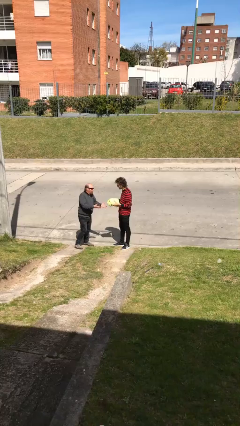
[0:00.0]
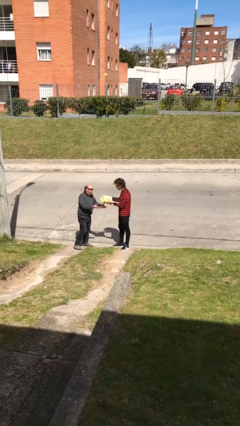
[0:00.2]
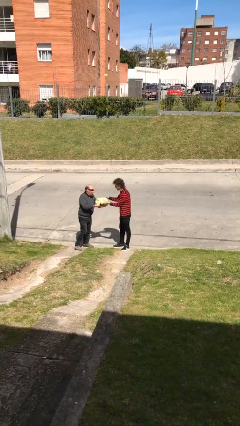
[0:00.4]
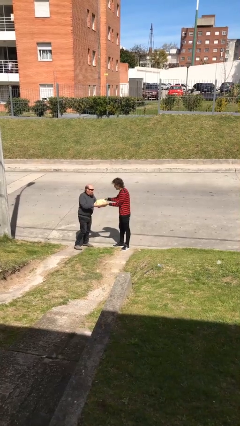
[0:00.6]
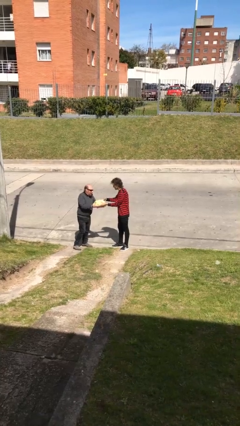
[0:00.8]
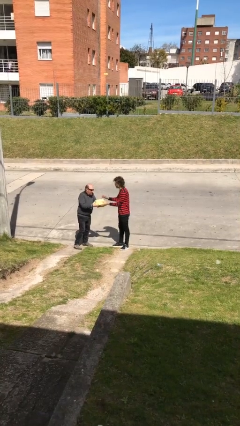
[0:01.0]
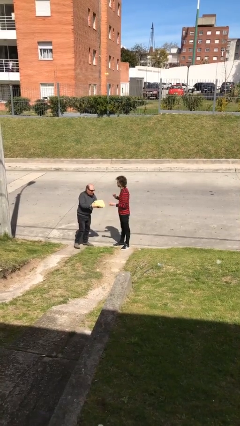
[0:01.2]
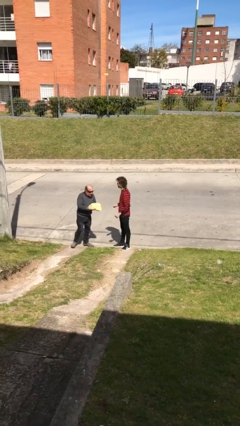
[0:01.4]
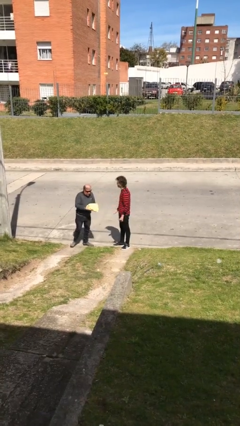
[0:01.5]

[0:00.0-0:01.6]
person transfers object to person

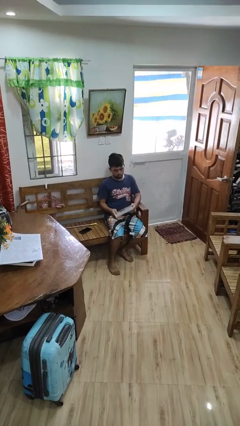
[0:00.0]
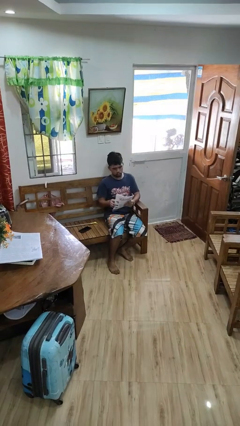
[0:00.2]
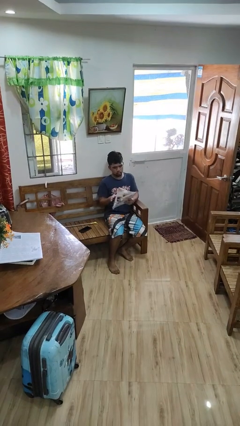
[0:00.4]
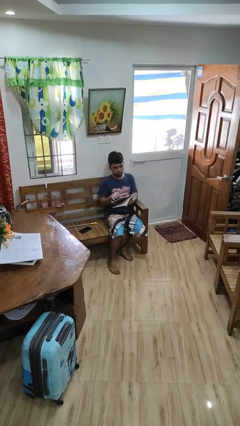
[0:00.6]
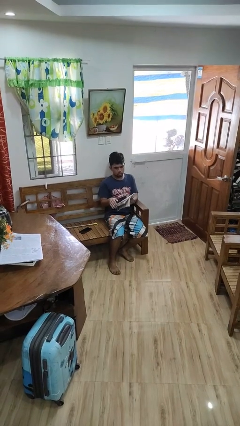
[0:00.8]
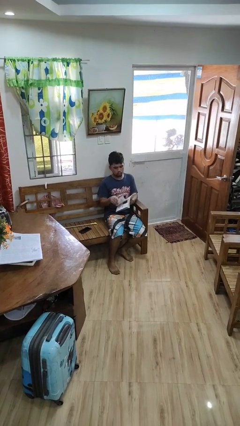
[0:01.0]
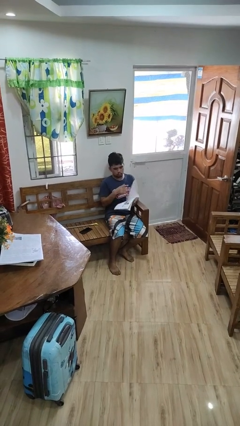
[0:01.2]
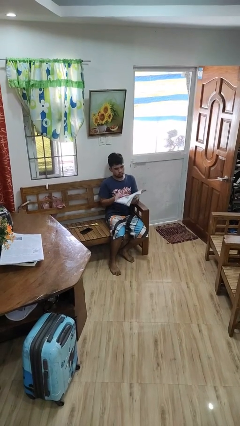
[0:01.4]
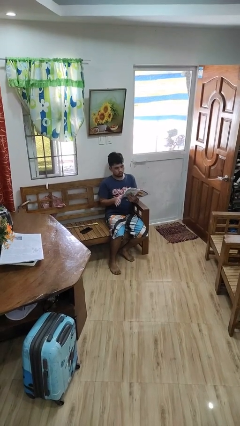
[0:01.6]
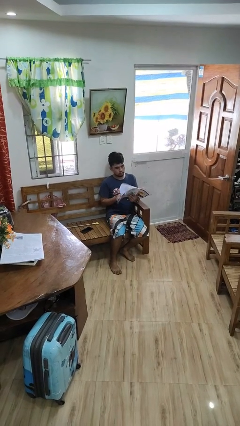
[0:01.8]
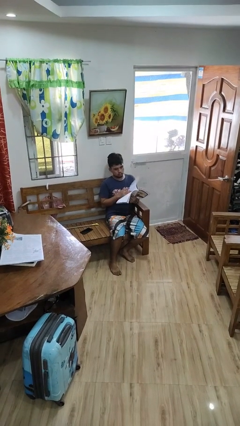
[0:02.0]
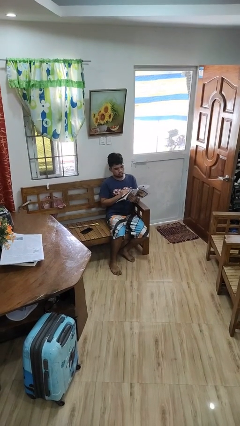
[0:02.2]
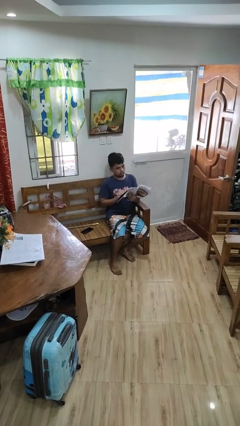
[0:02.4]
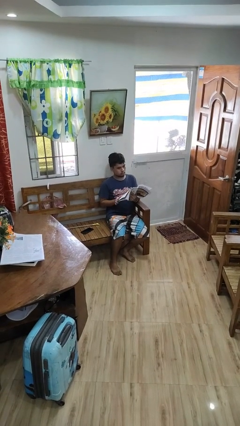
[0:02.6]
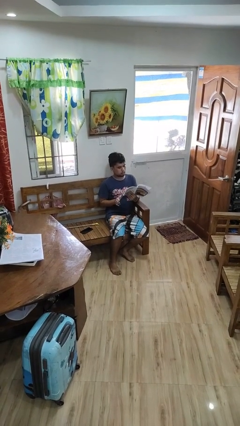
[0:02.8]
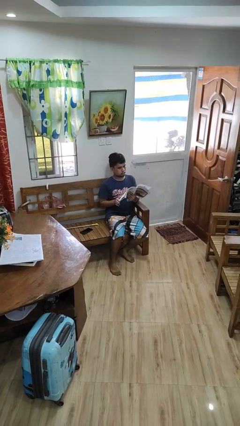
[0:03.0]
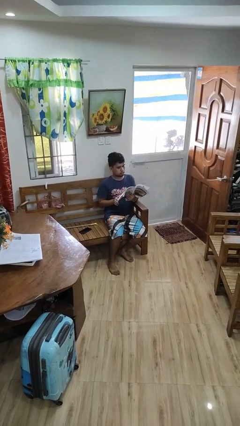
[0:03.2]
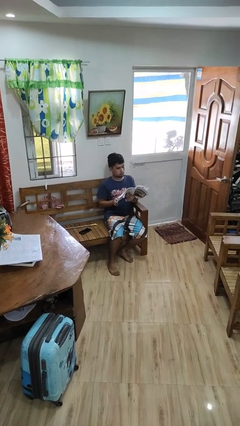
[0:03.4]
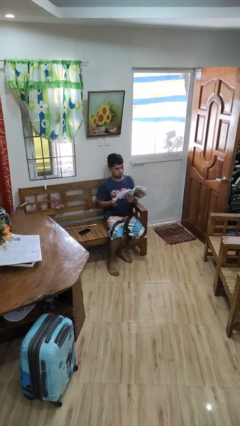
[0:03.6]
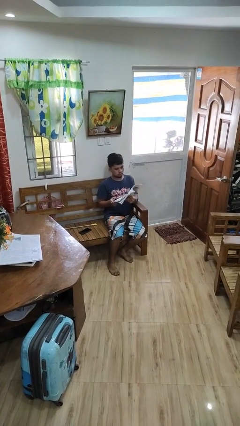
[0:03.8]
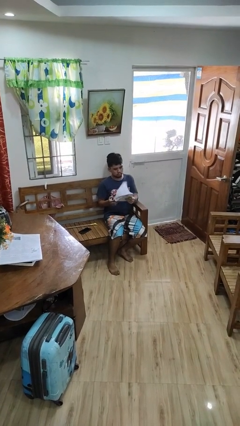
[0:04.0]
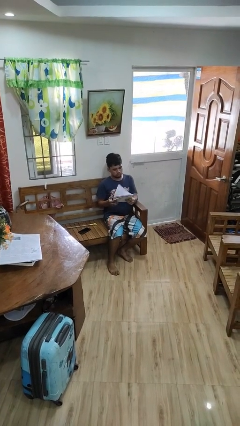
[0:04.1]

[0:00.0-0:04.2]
person reads magazine

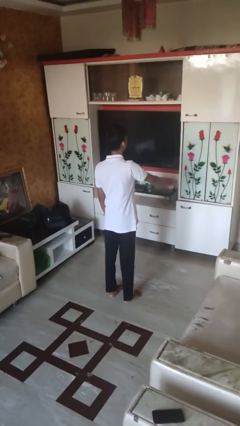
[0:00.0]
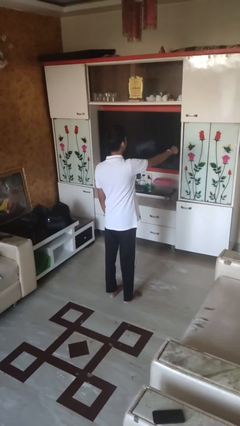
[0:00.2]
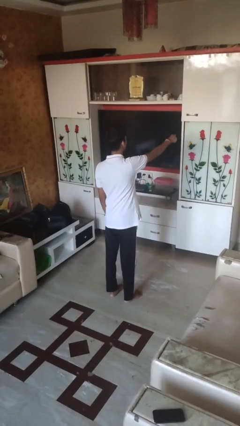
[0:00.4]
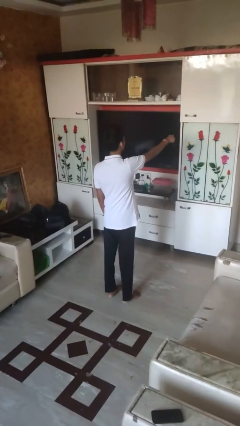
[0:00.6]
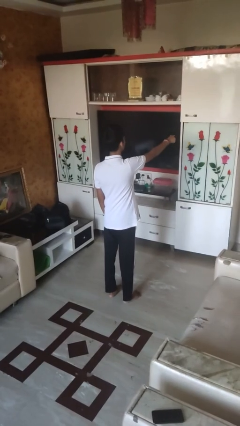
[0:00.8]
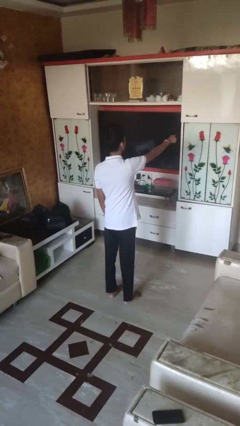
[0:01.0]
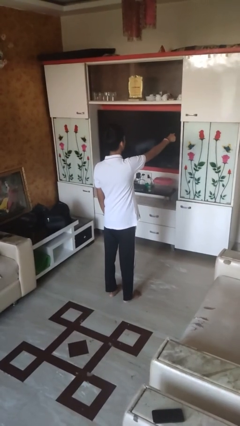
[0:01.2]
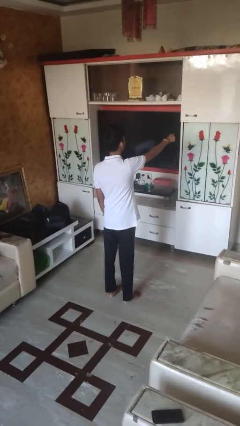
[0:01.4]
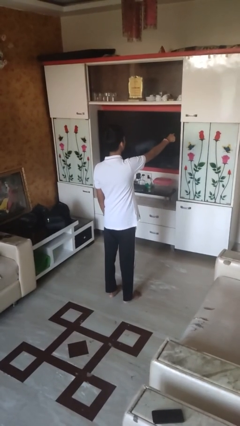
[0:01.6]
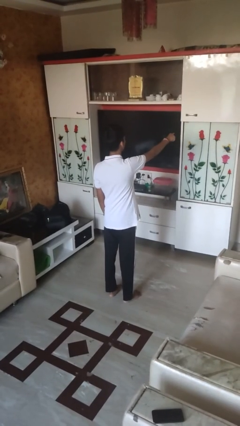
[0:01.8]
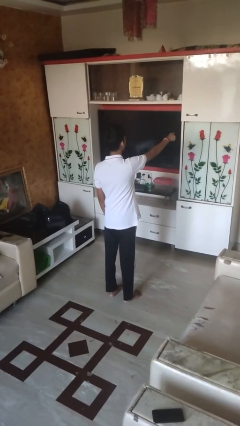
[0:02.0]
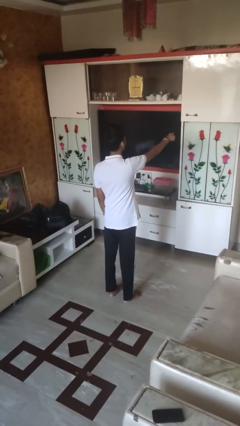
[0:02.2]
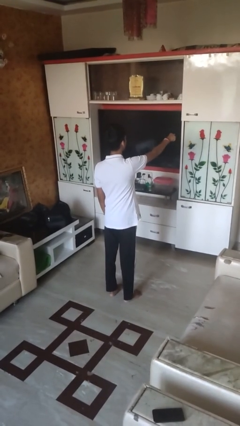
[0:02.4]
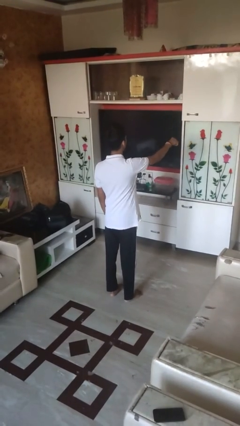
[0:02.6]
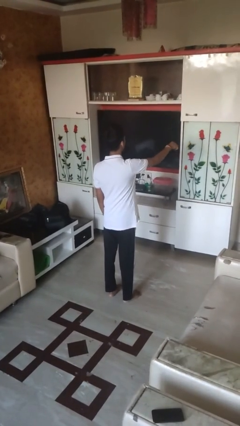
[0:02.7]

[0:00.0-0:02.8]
person points at person

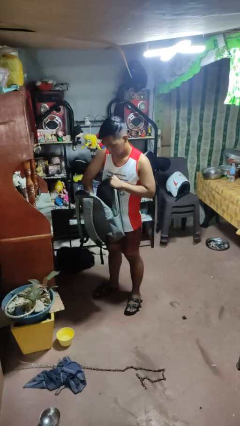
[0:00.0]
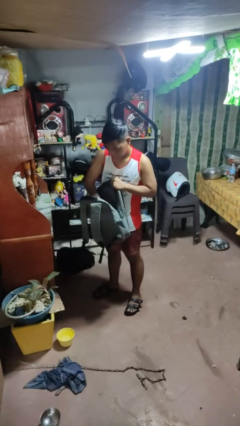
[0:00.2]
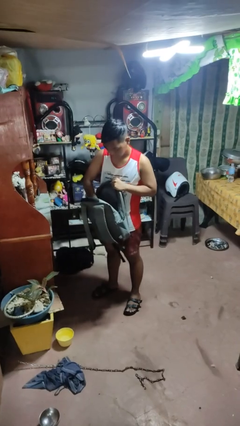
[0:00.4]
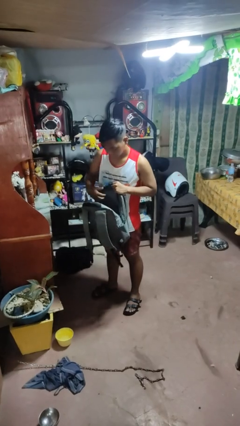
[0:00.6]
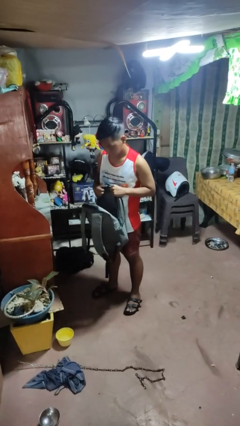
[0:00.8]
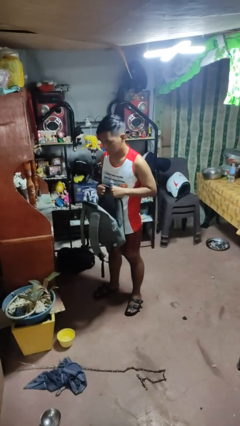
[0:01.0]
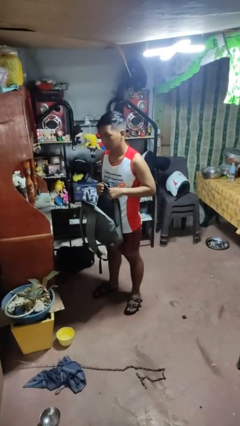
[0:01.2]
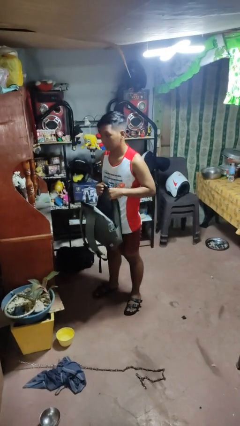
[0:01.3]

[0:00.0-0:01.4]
person puts object into bag

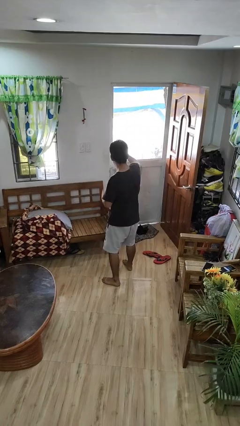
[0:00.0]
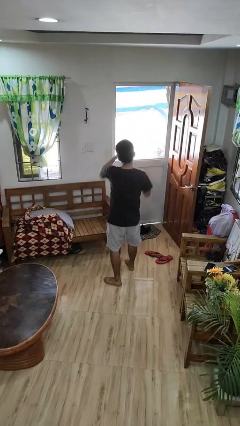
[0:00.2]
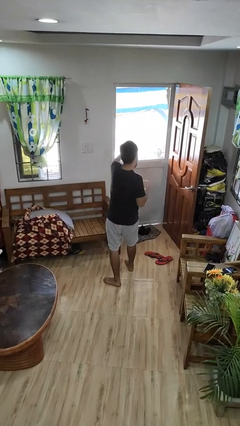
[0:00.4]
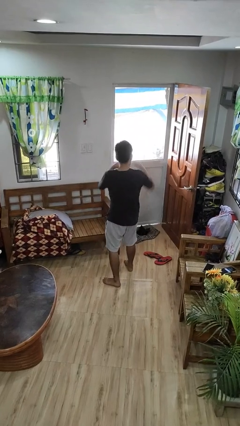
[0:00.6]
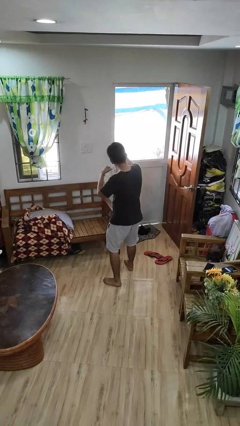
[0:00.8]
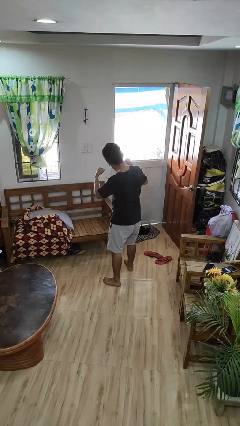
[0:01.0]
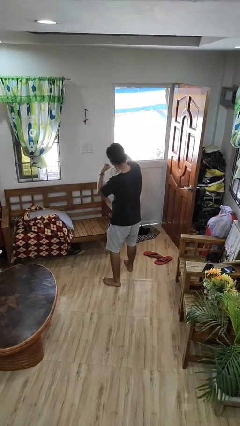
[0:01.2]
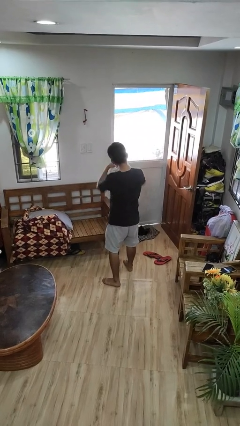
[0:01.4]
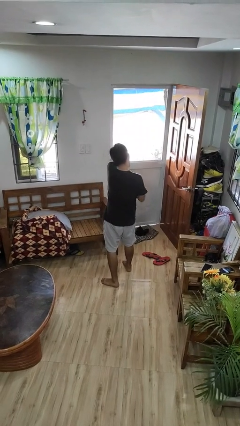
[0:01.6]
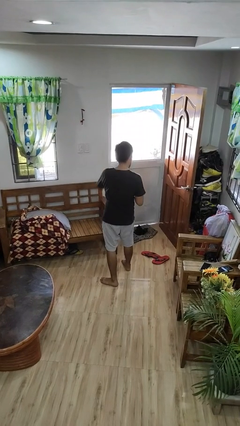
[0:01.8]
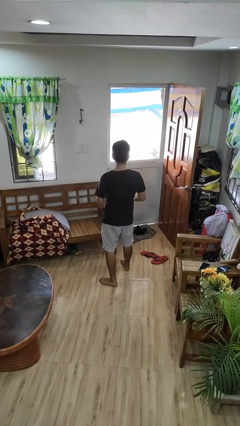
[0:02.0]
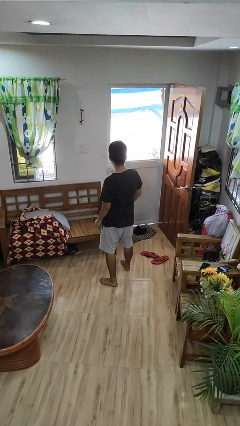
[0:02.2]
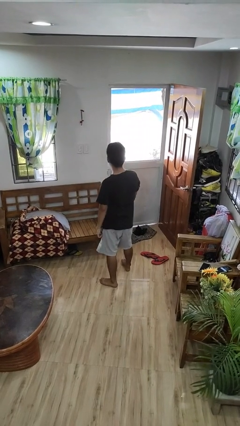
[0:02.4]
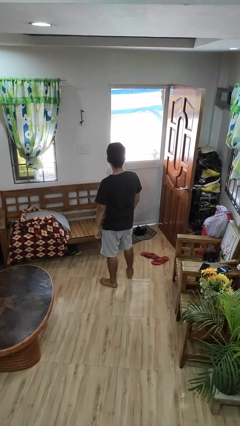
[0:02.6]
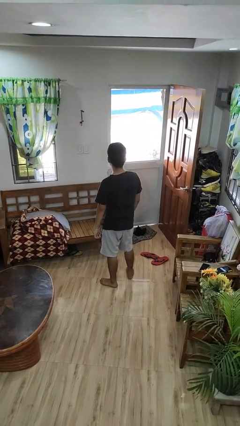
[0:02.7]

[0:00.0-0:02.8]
person punches

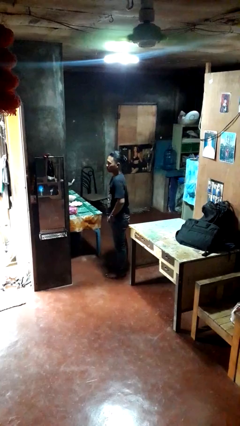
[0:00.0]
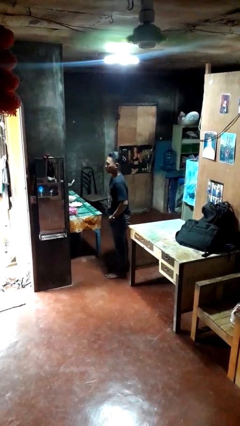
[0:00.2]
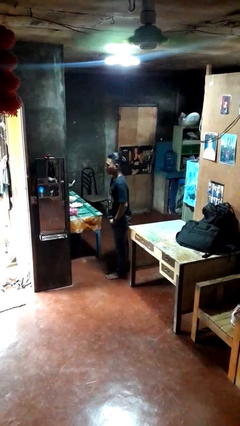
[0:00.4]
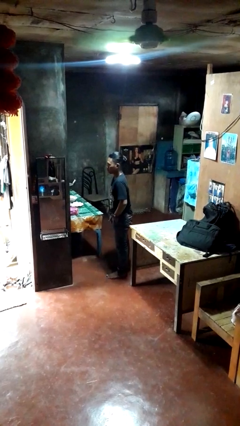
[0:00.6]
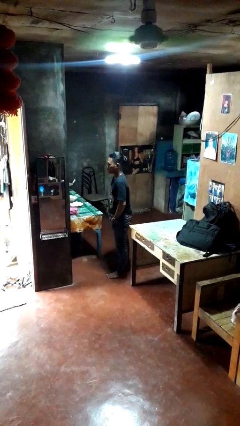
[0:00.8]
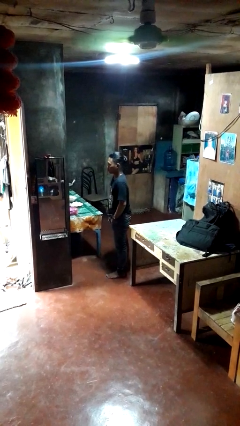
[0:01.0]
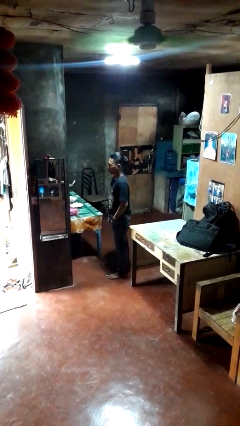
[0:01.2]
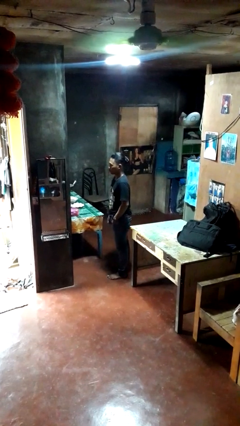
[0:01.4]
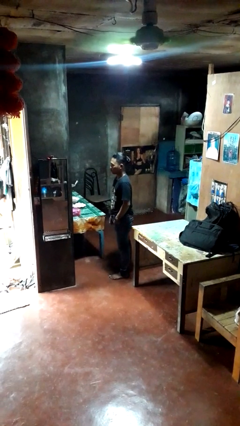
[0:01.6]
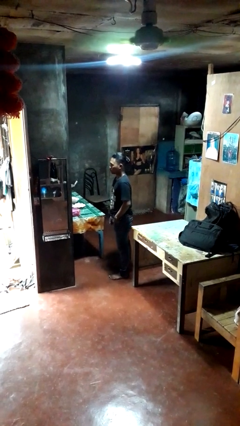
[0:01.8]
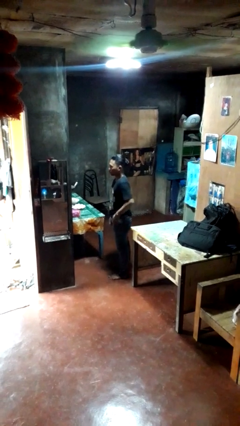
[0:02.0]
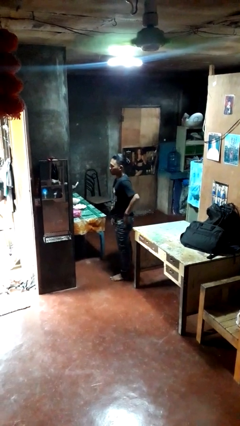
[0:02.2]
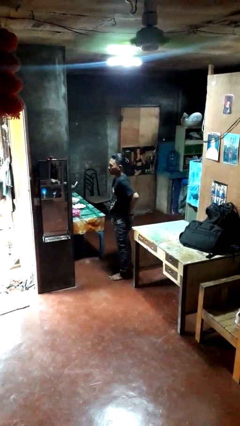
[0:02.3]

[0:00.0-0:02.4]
person puts hands in back pockets

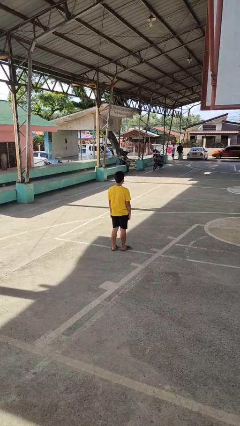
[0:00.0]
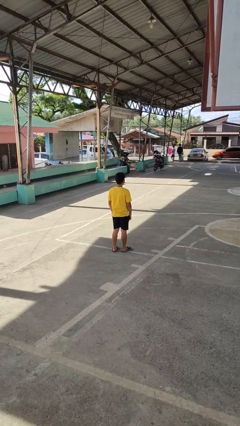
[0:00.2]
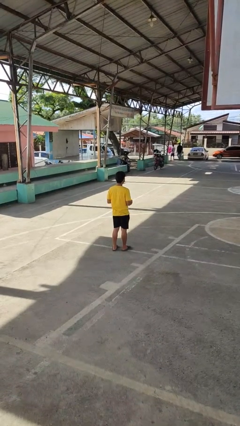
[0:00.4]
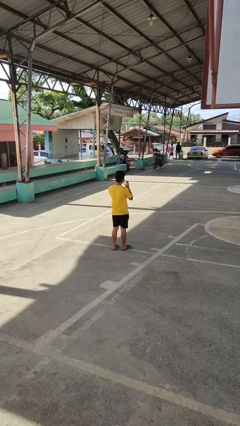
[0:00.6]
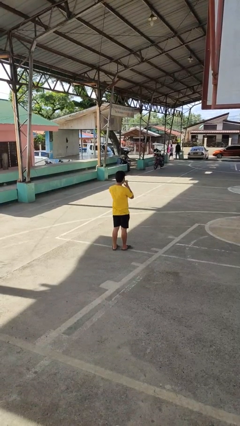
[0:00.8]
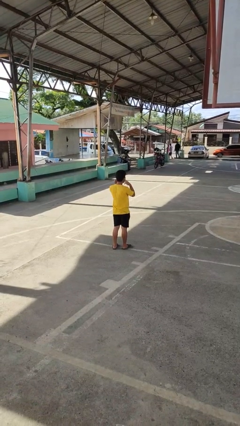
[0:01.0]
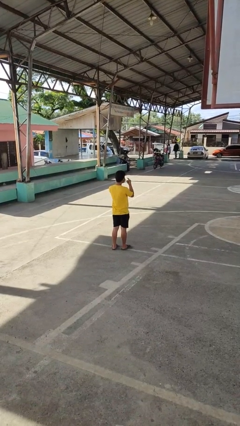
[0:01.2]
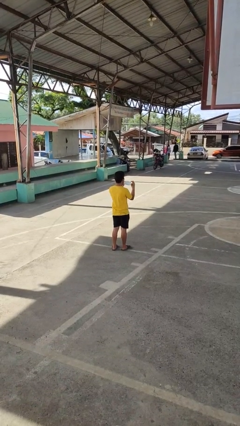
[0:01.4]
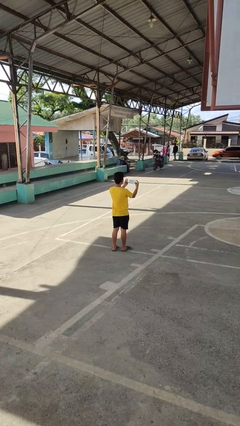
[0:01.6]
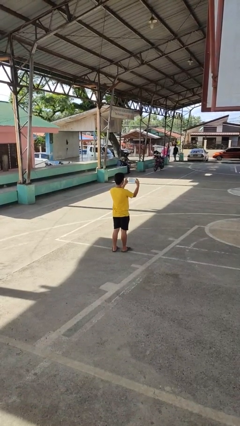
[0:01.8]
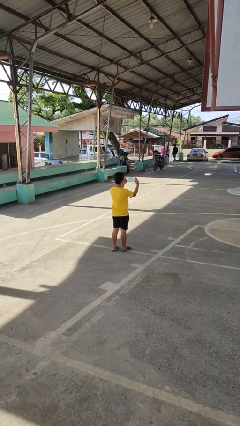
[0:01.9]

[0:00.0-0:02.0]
person takes off facemask
